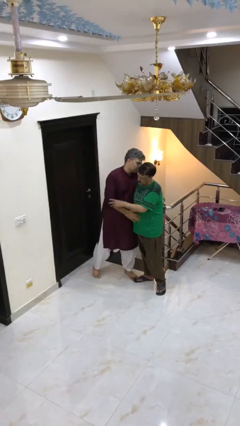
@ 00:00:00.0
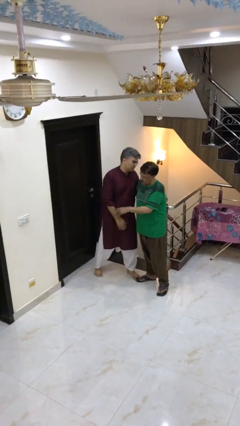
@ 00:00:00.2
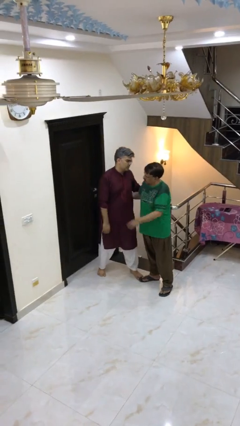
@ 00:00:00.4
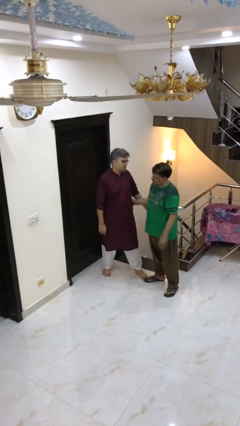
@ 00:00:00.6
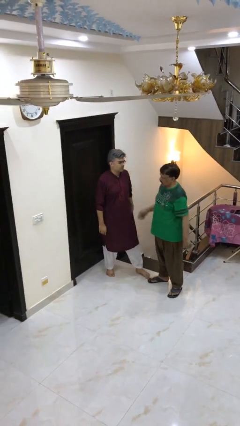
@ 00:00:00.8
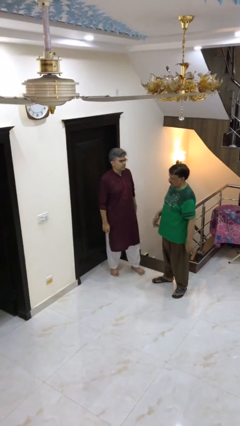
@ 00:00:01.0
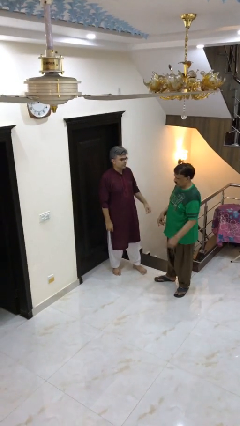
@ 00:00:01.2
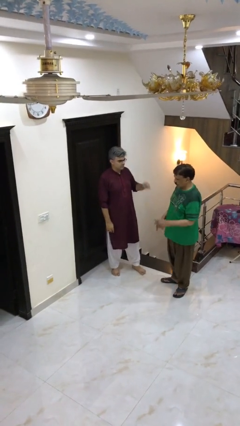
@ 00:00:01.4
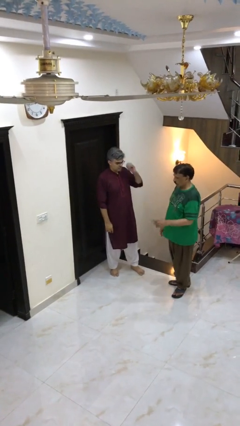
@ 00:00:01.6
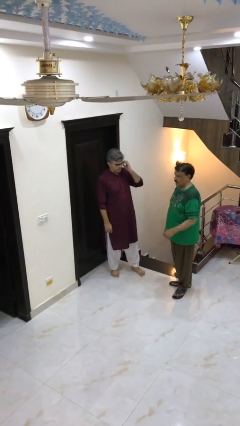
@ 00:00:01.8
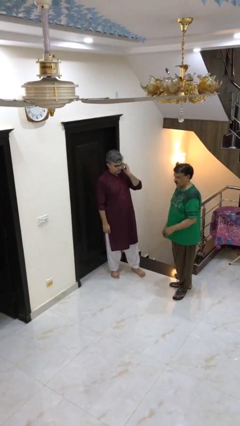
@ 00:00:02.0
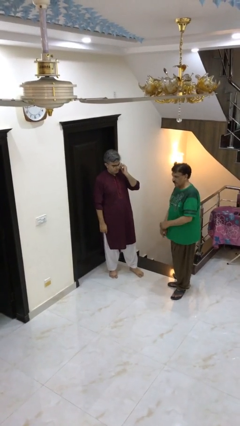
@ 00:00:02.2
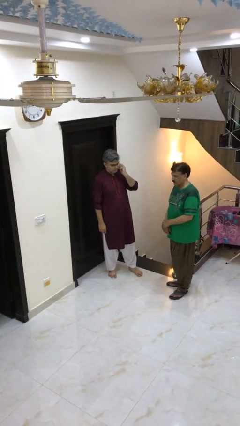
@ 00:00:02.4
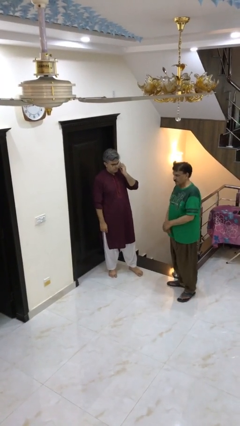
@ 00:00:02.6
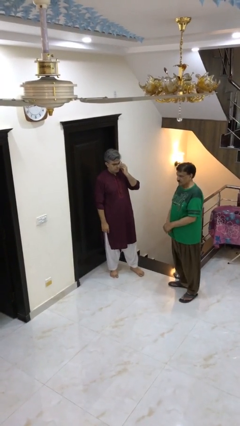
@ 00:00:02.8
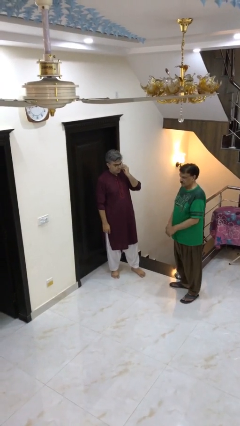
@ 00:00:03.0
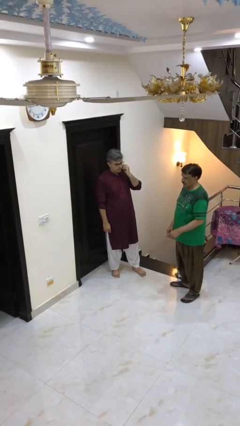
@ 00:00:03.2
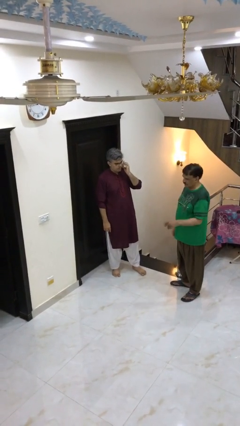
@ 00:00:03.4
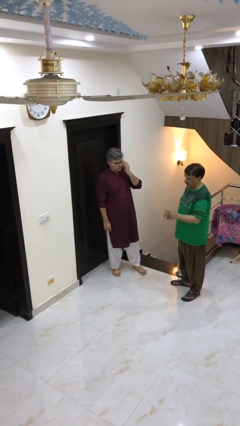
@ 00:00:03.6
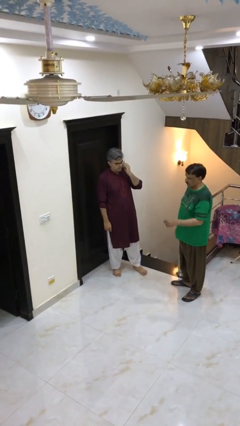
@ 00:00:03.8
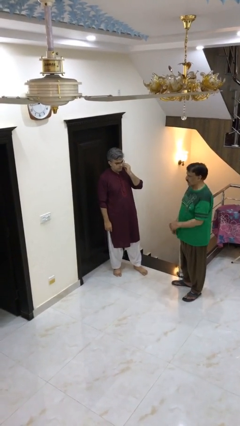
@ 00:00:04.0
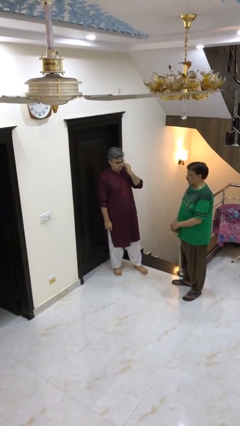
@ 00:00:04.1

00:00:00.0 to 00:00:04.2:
person talks to person

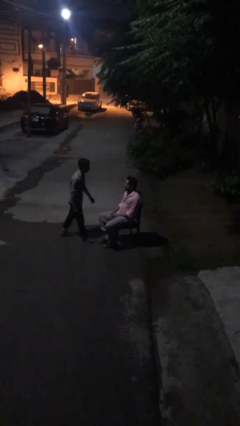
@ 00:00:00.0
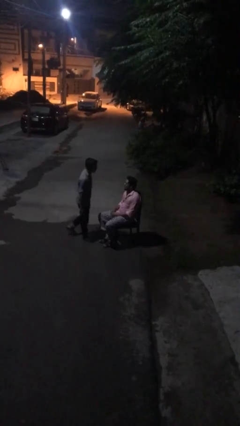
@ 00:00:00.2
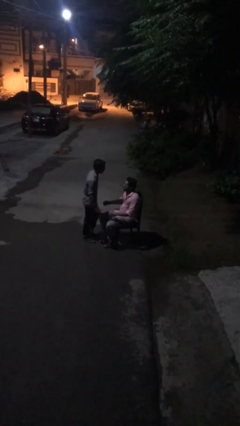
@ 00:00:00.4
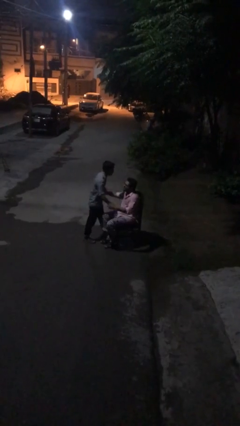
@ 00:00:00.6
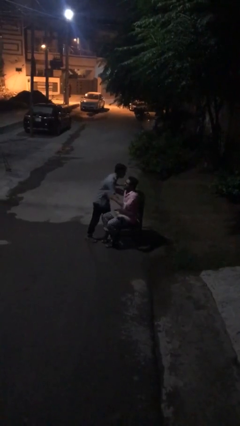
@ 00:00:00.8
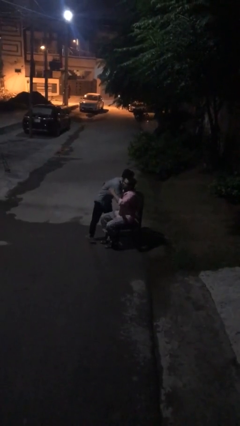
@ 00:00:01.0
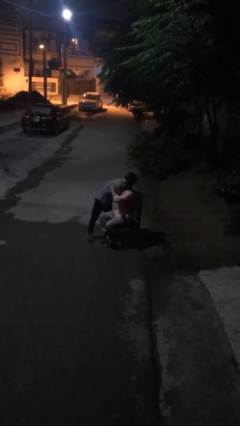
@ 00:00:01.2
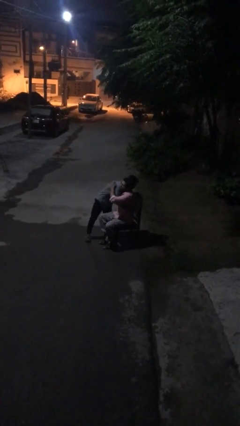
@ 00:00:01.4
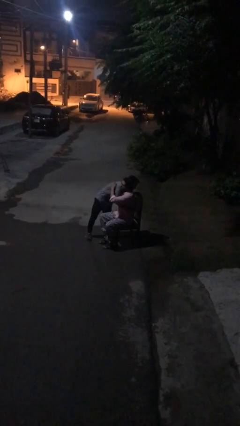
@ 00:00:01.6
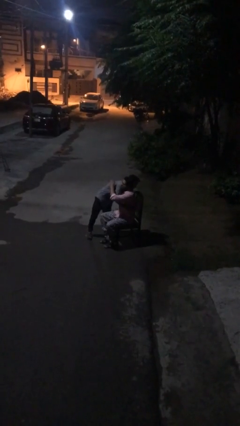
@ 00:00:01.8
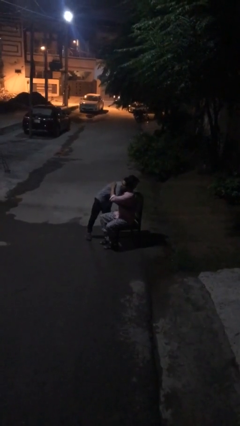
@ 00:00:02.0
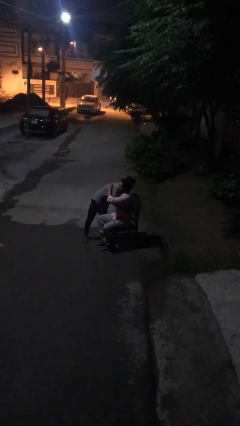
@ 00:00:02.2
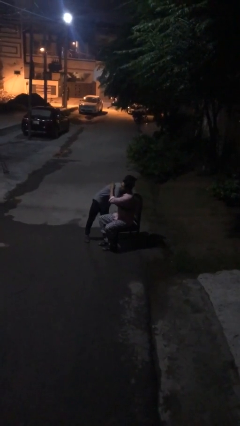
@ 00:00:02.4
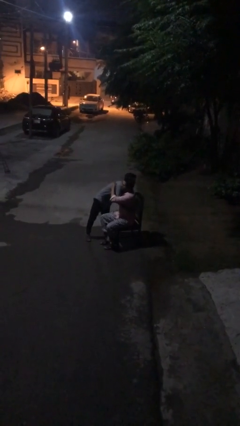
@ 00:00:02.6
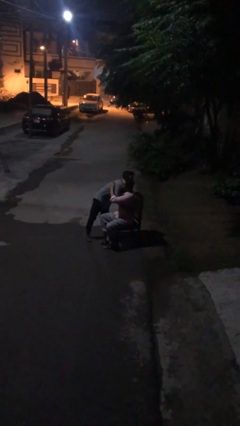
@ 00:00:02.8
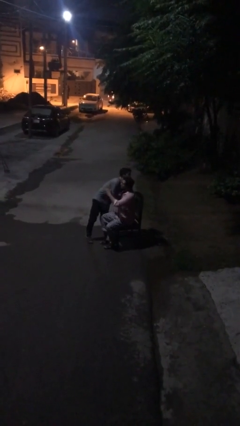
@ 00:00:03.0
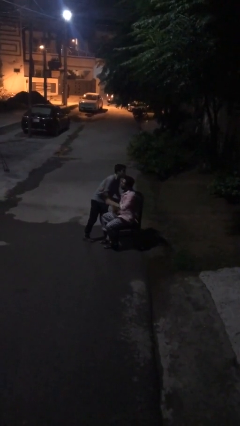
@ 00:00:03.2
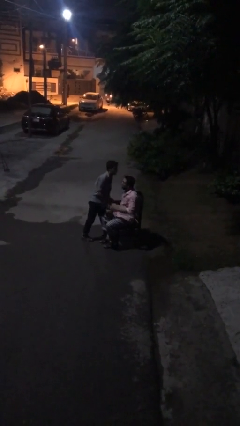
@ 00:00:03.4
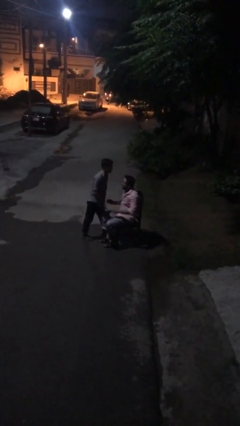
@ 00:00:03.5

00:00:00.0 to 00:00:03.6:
person embraces person

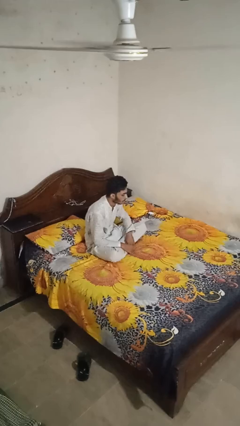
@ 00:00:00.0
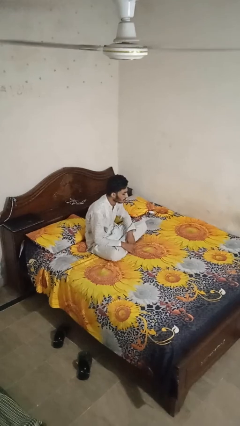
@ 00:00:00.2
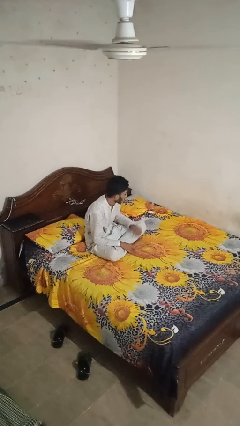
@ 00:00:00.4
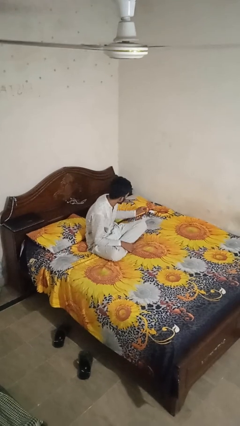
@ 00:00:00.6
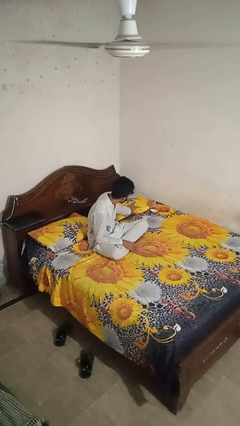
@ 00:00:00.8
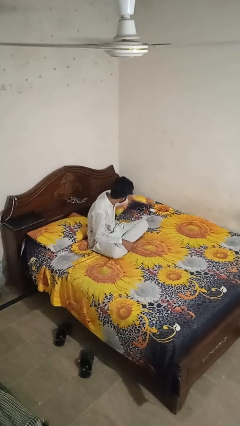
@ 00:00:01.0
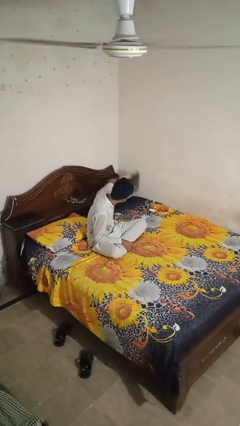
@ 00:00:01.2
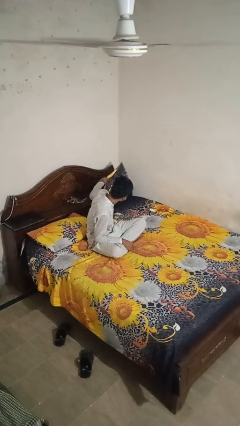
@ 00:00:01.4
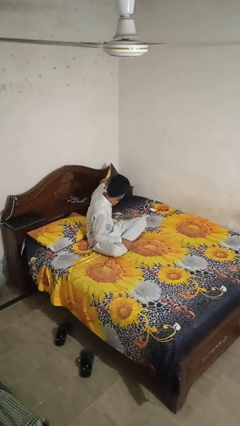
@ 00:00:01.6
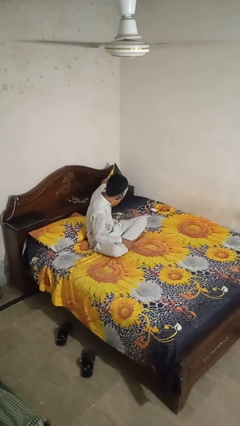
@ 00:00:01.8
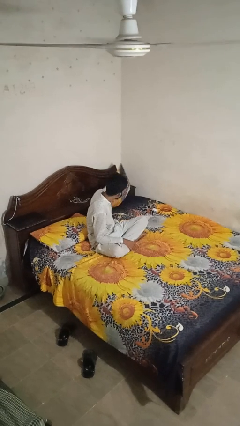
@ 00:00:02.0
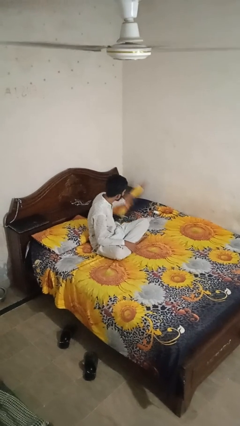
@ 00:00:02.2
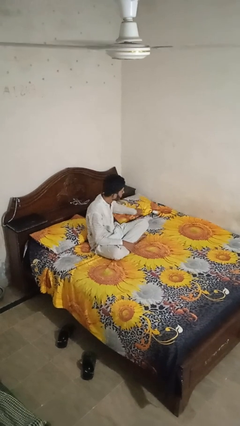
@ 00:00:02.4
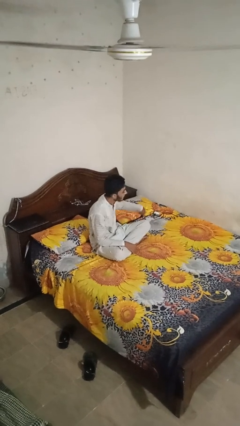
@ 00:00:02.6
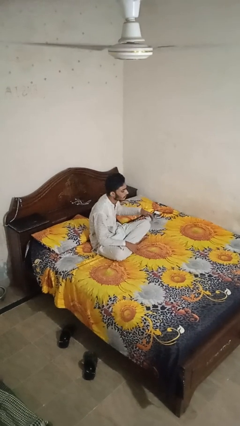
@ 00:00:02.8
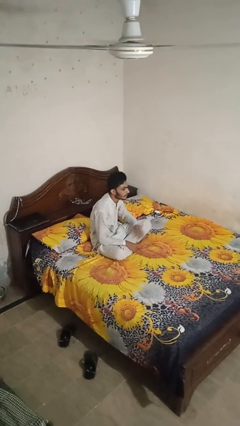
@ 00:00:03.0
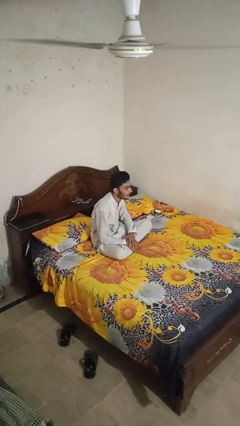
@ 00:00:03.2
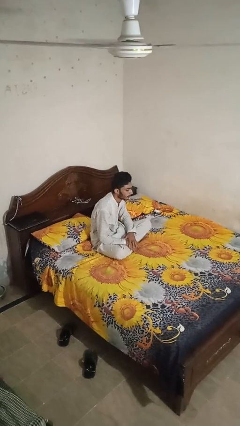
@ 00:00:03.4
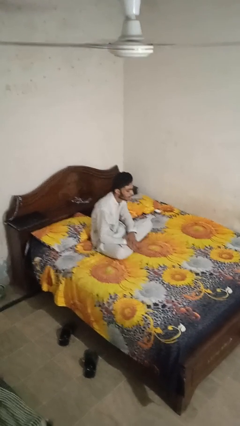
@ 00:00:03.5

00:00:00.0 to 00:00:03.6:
person searches under bed

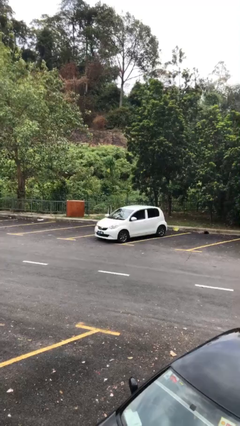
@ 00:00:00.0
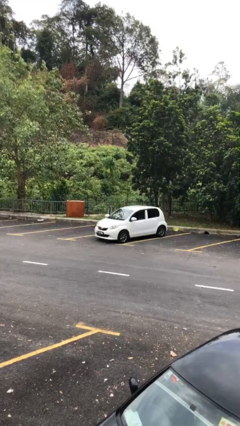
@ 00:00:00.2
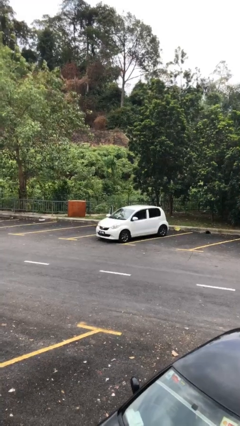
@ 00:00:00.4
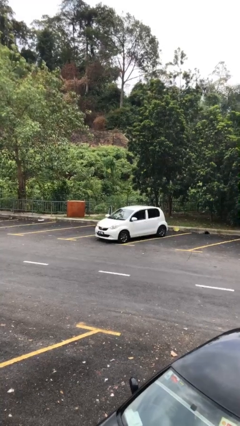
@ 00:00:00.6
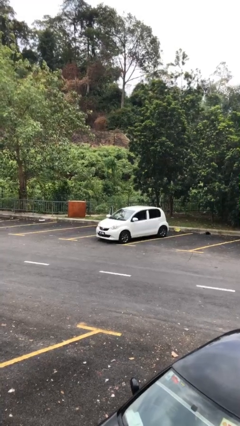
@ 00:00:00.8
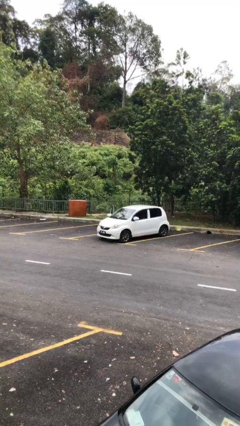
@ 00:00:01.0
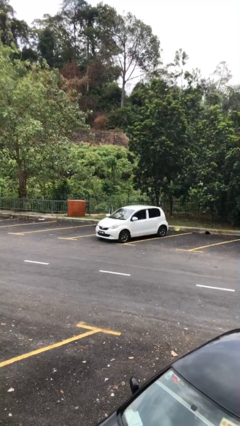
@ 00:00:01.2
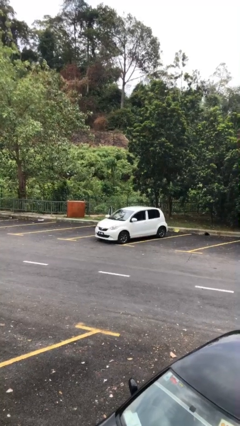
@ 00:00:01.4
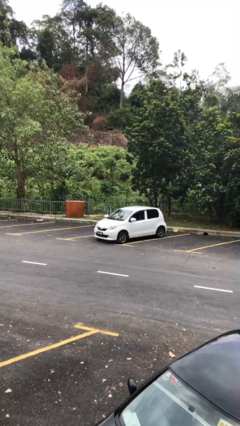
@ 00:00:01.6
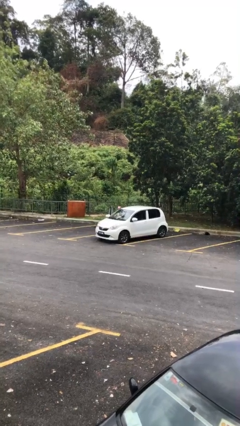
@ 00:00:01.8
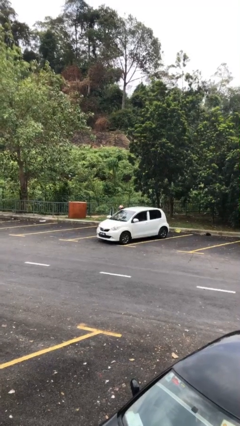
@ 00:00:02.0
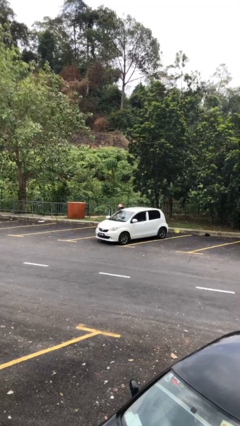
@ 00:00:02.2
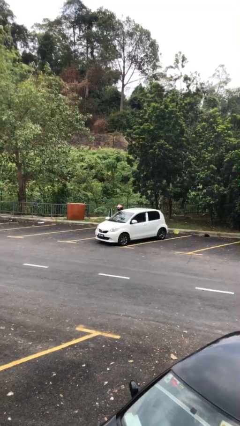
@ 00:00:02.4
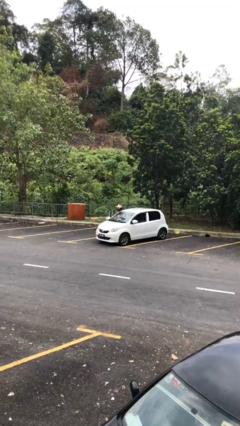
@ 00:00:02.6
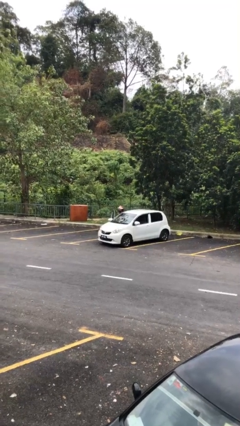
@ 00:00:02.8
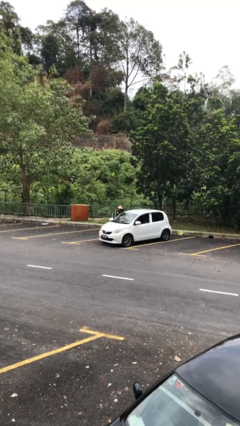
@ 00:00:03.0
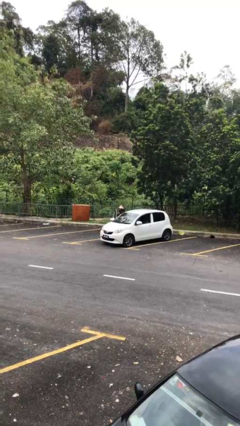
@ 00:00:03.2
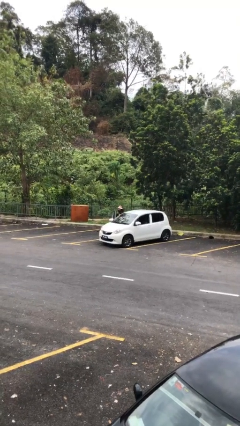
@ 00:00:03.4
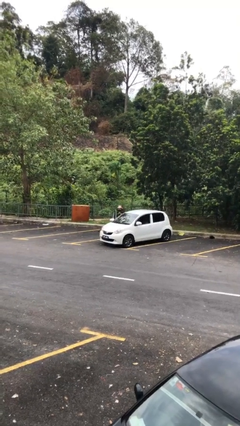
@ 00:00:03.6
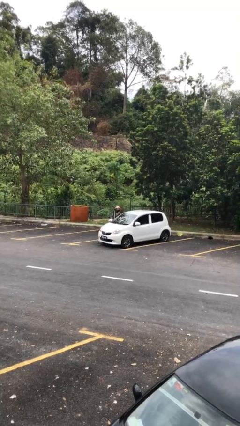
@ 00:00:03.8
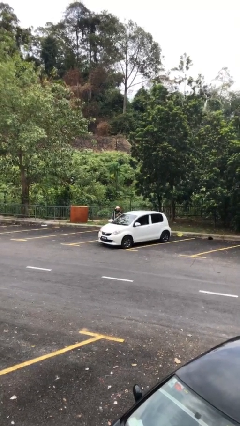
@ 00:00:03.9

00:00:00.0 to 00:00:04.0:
person exits car

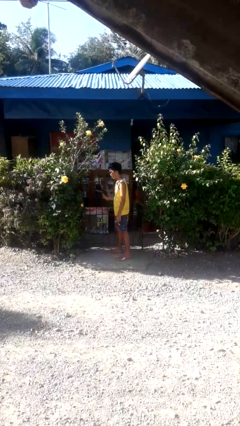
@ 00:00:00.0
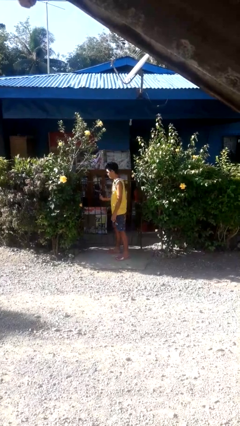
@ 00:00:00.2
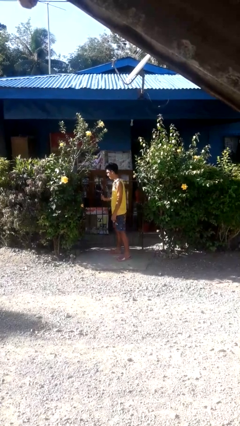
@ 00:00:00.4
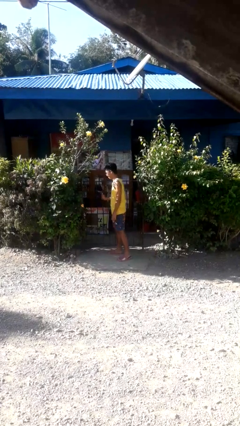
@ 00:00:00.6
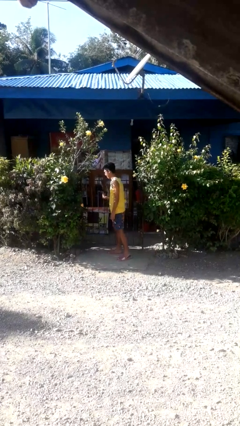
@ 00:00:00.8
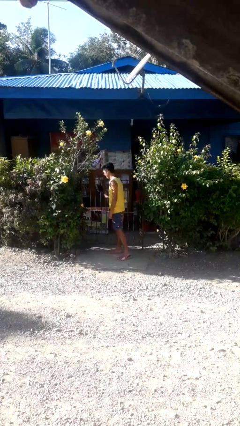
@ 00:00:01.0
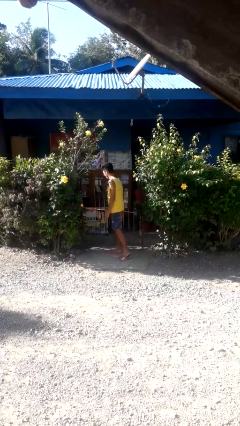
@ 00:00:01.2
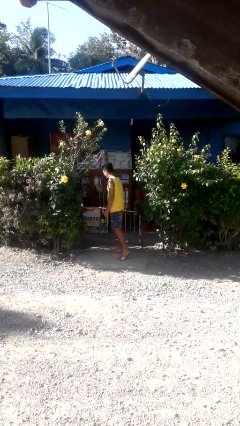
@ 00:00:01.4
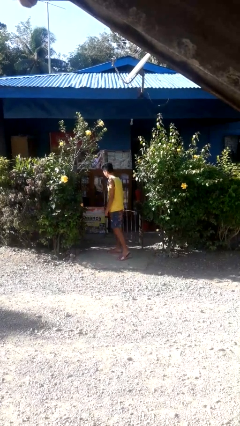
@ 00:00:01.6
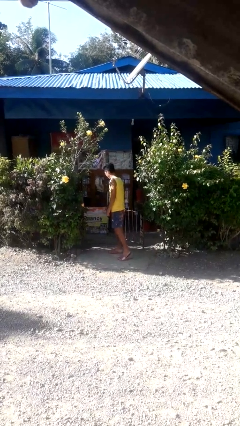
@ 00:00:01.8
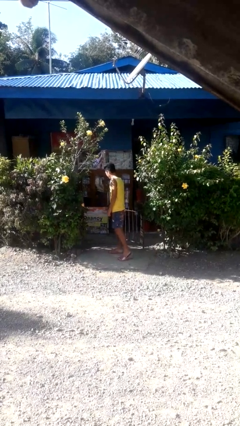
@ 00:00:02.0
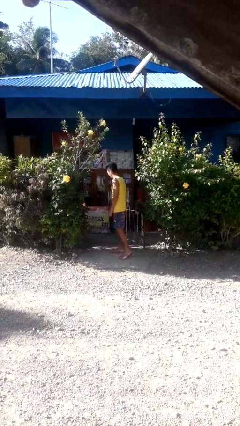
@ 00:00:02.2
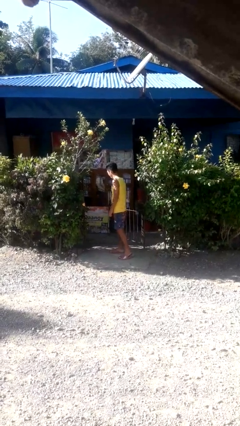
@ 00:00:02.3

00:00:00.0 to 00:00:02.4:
person opens gate
